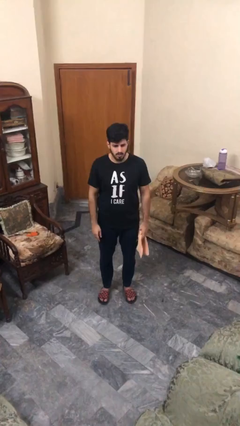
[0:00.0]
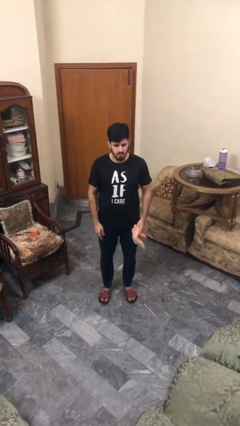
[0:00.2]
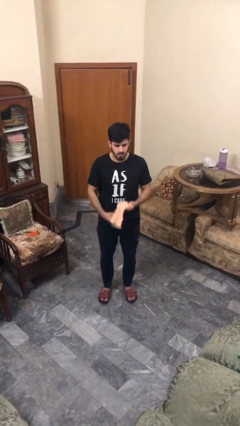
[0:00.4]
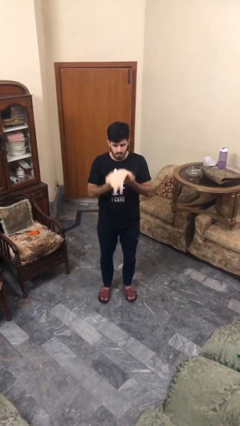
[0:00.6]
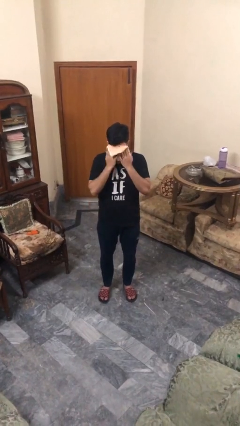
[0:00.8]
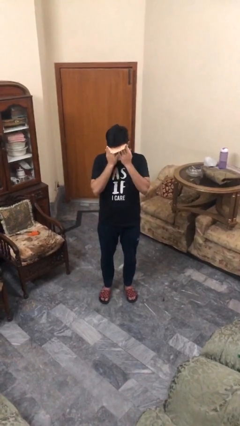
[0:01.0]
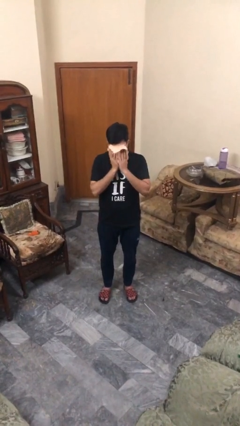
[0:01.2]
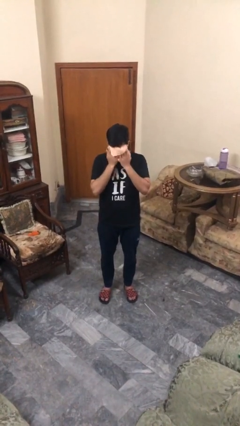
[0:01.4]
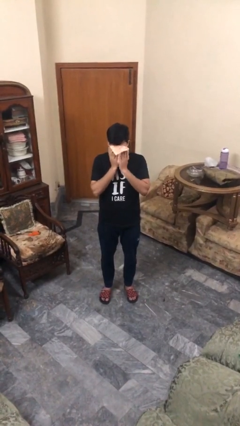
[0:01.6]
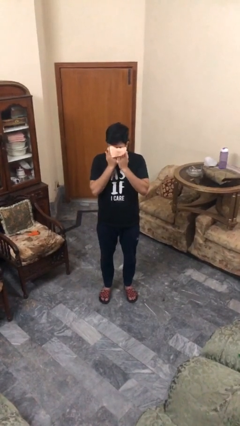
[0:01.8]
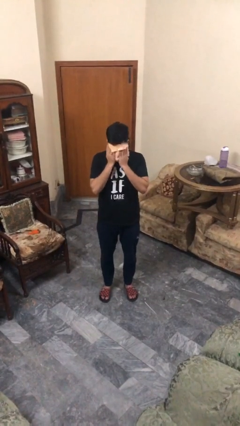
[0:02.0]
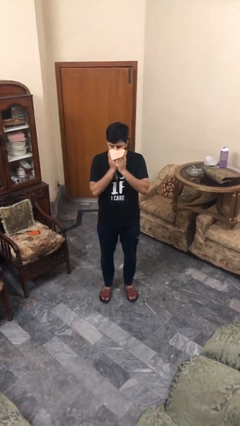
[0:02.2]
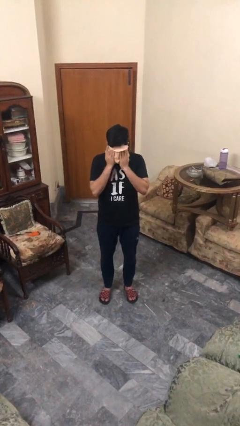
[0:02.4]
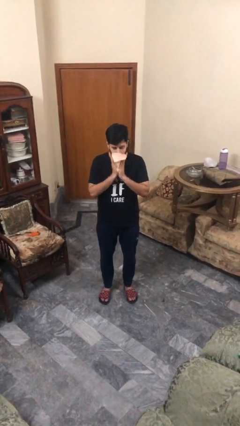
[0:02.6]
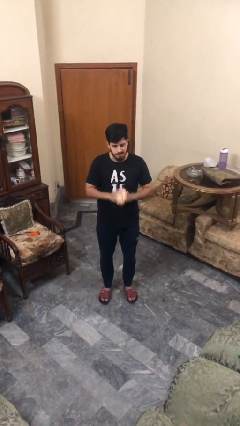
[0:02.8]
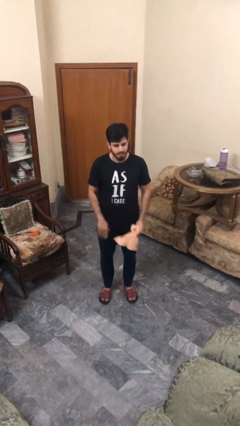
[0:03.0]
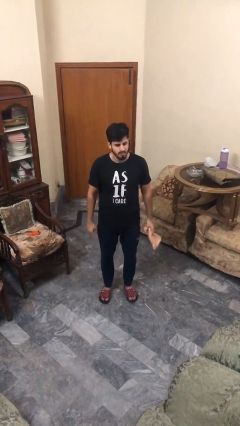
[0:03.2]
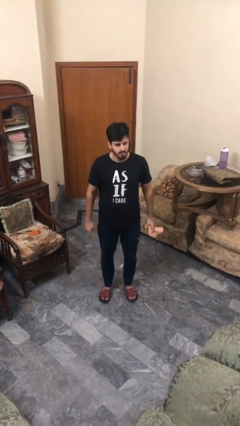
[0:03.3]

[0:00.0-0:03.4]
person wipes mouth with napkin

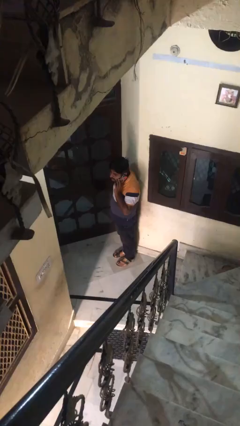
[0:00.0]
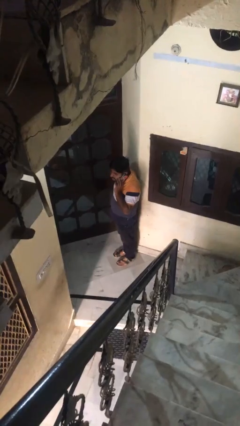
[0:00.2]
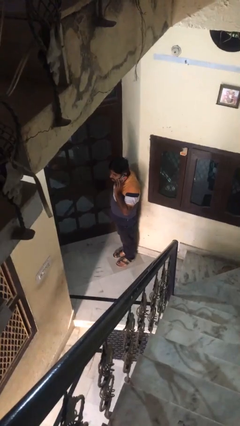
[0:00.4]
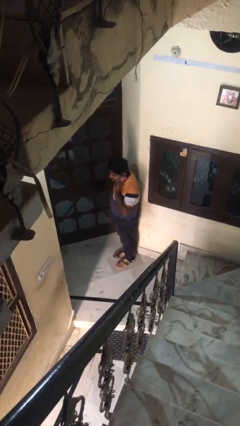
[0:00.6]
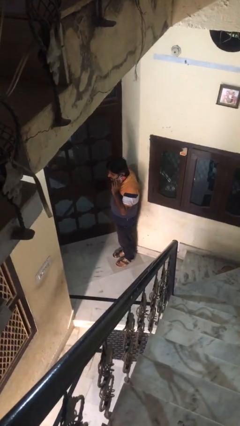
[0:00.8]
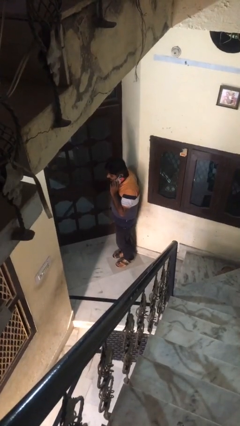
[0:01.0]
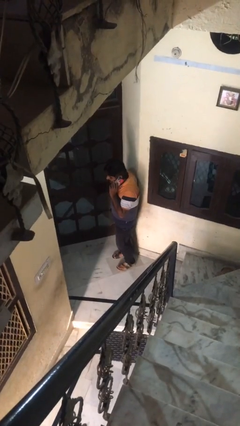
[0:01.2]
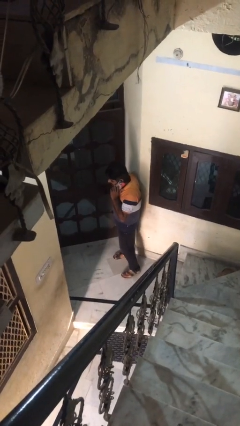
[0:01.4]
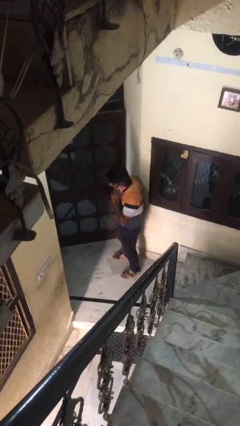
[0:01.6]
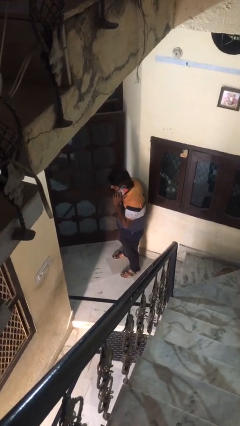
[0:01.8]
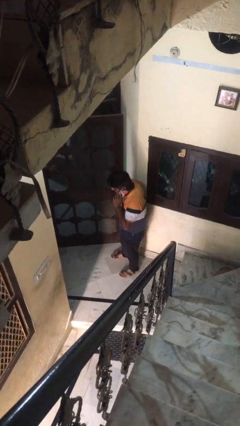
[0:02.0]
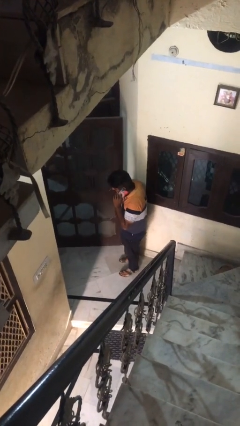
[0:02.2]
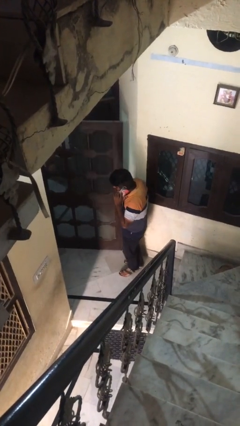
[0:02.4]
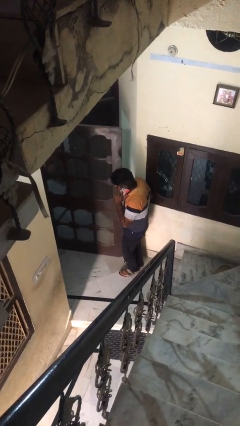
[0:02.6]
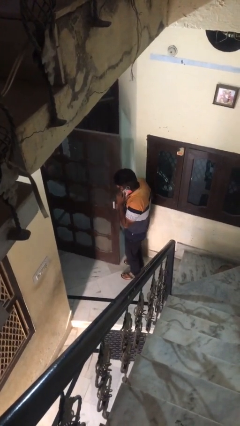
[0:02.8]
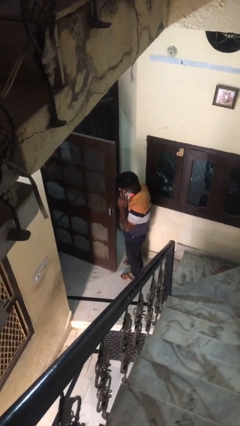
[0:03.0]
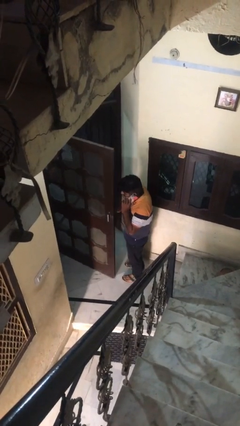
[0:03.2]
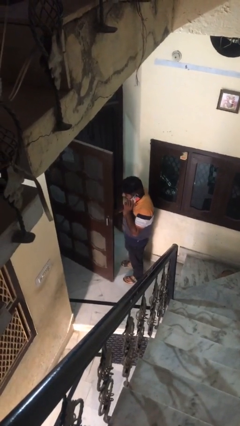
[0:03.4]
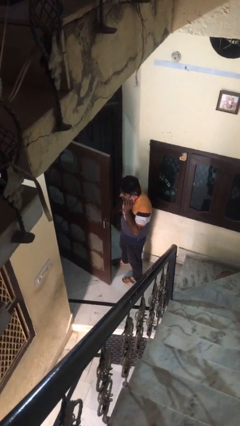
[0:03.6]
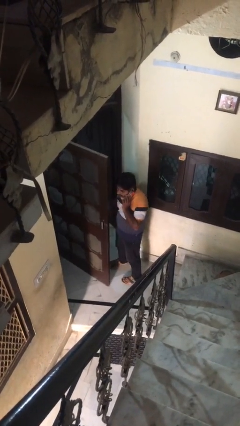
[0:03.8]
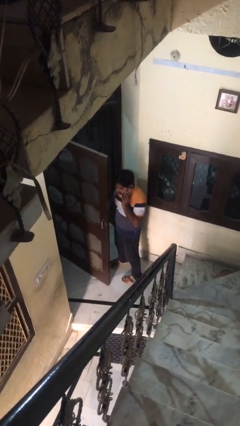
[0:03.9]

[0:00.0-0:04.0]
person opens facility door

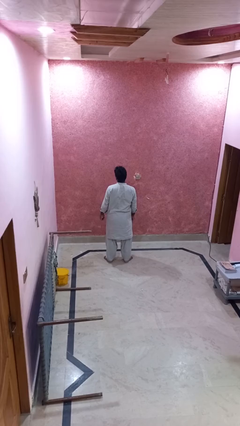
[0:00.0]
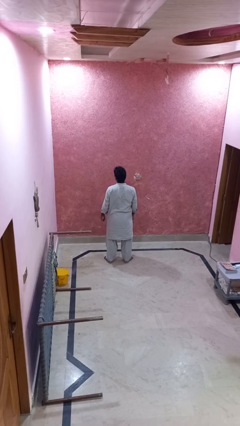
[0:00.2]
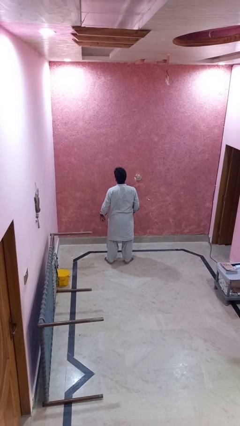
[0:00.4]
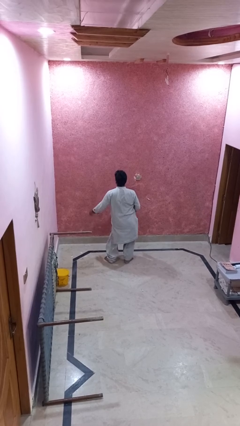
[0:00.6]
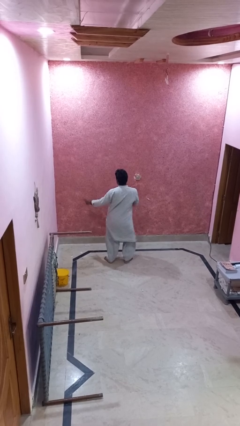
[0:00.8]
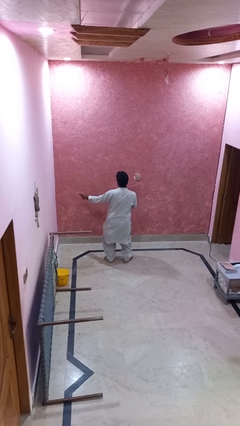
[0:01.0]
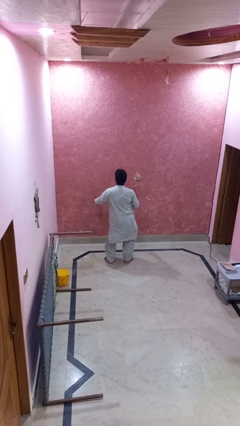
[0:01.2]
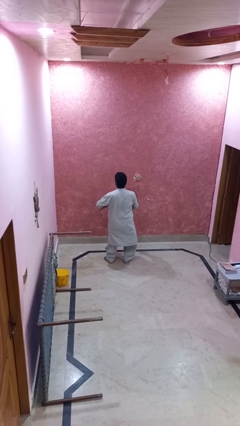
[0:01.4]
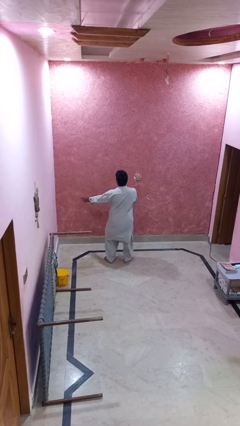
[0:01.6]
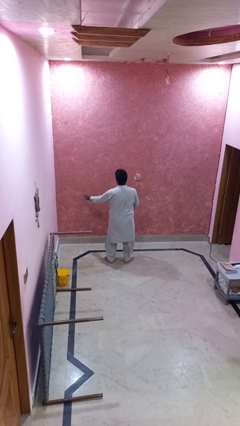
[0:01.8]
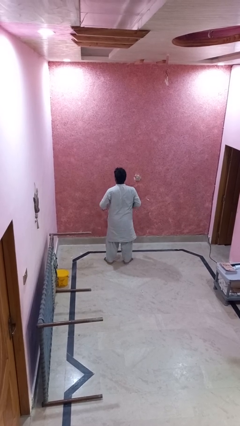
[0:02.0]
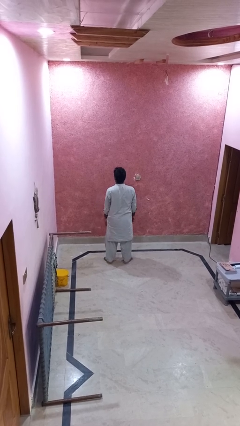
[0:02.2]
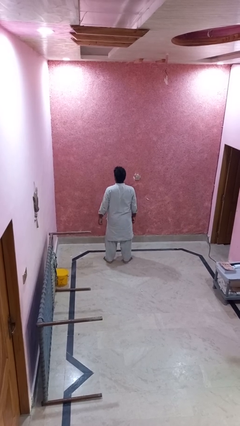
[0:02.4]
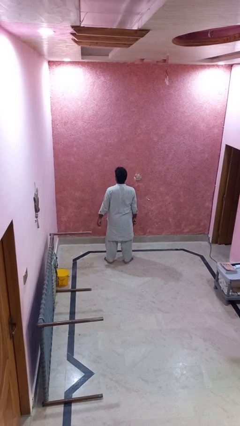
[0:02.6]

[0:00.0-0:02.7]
person dances in place

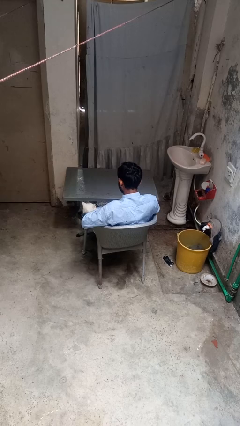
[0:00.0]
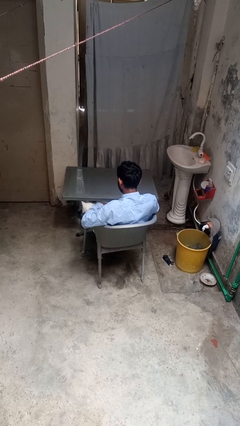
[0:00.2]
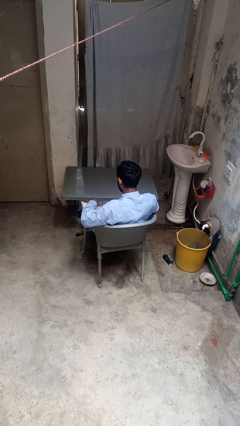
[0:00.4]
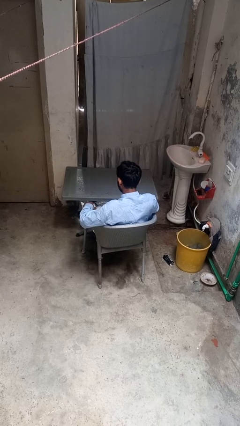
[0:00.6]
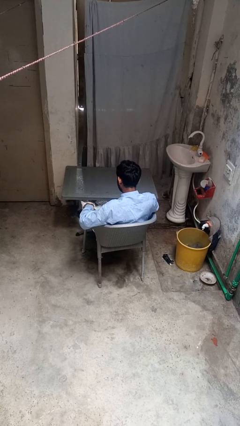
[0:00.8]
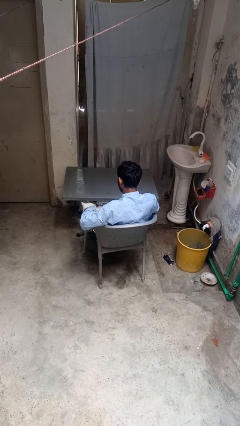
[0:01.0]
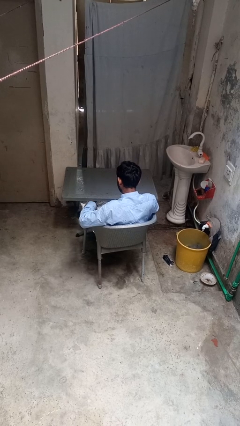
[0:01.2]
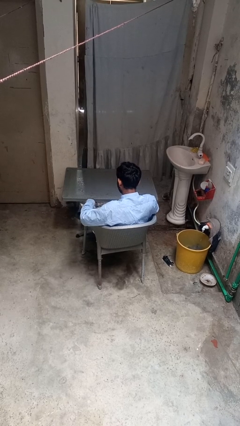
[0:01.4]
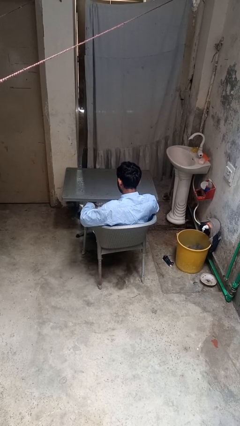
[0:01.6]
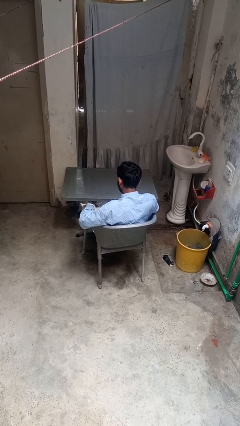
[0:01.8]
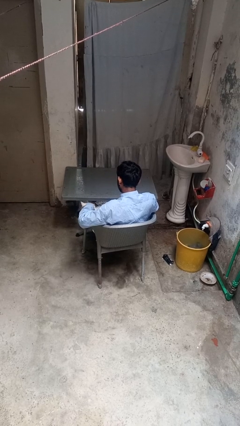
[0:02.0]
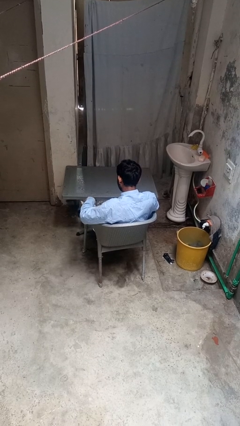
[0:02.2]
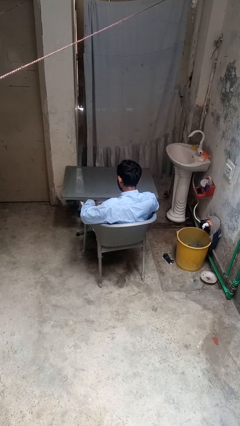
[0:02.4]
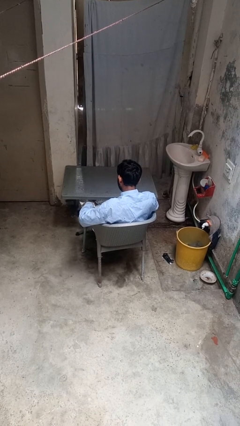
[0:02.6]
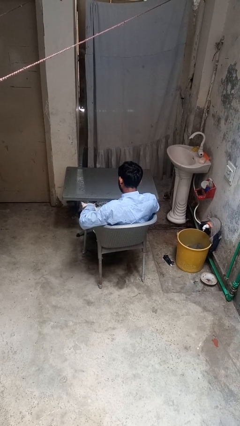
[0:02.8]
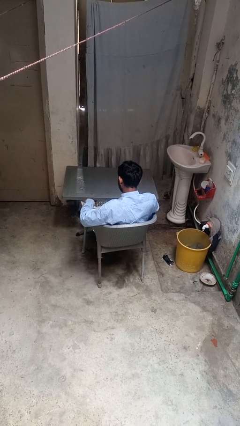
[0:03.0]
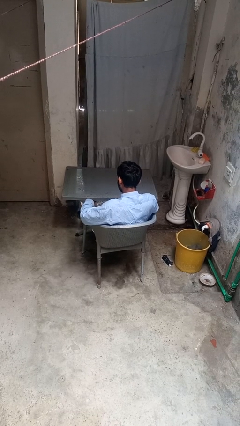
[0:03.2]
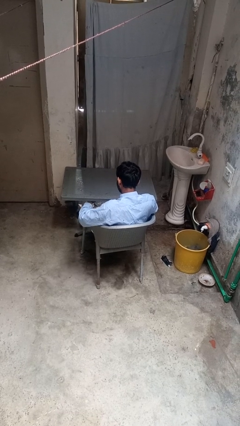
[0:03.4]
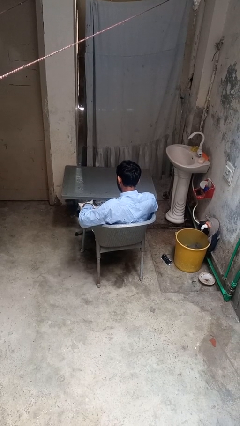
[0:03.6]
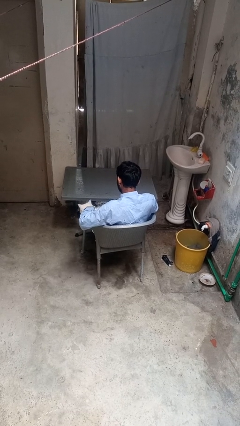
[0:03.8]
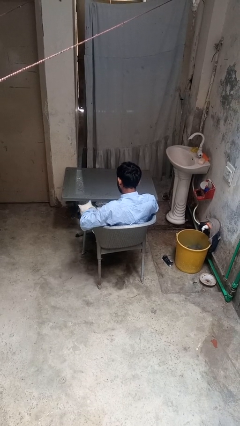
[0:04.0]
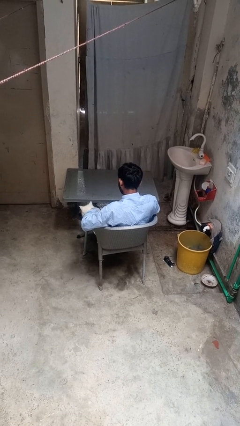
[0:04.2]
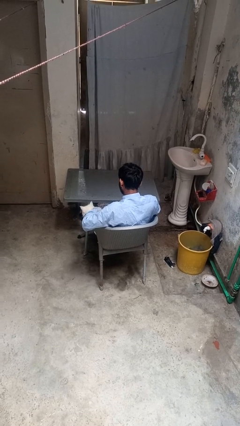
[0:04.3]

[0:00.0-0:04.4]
person pets cat

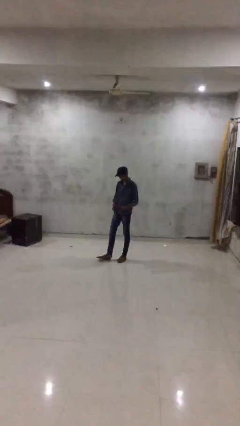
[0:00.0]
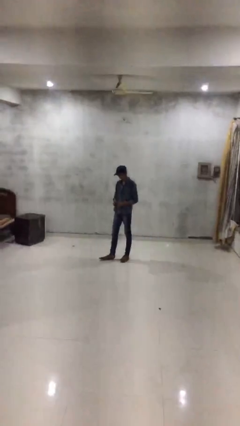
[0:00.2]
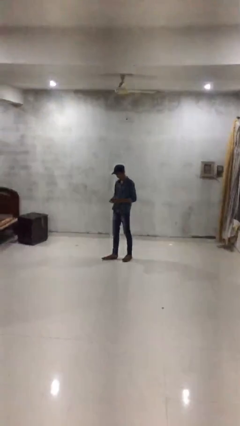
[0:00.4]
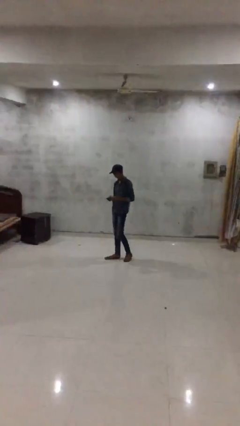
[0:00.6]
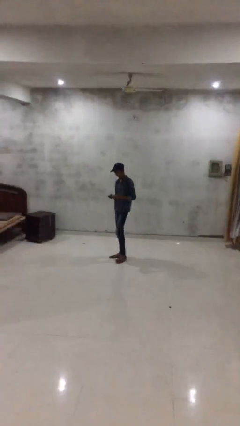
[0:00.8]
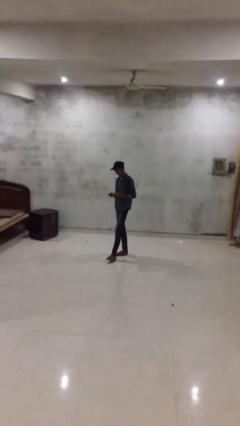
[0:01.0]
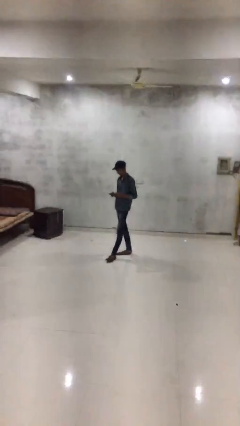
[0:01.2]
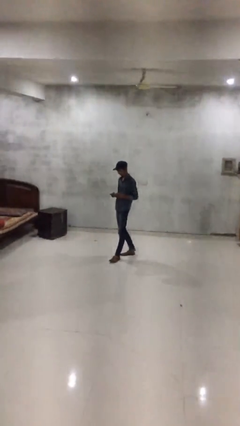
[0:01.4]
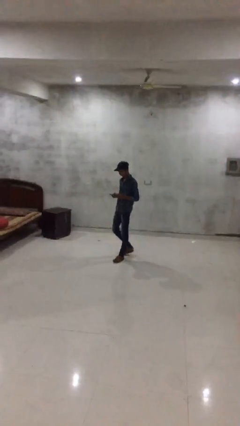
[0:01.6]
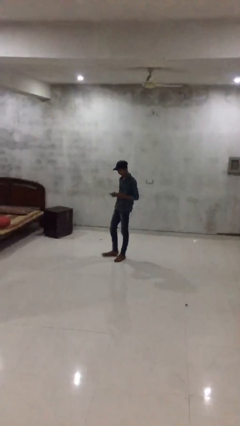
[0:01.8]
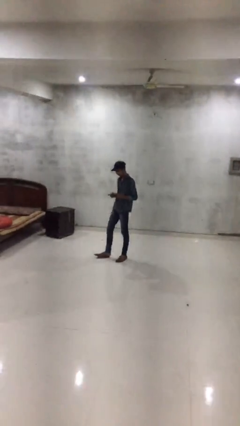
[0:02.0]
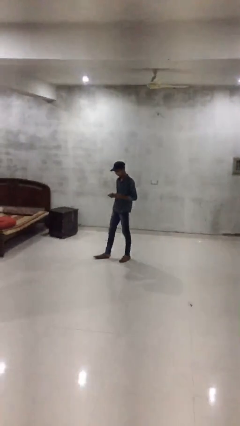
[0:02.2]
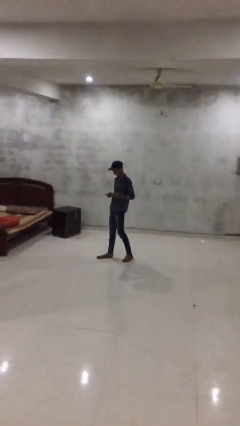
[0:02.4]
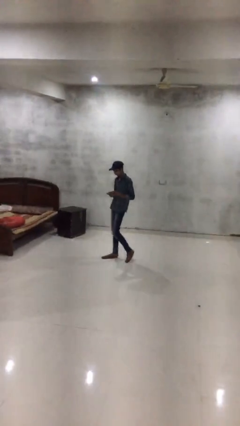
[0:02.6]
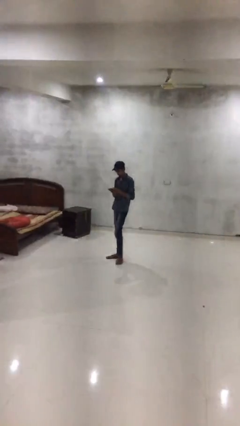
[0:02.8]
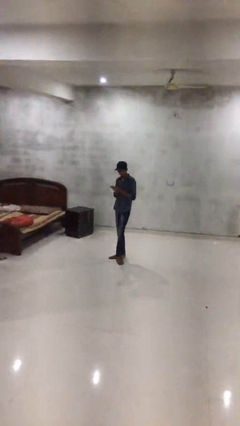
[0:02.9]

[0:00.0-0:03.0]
person texts on phone

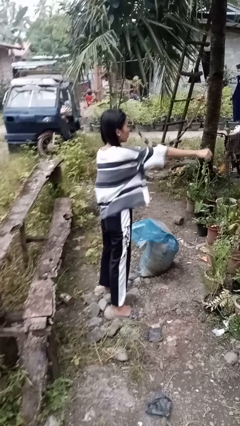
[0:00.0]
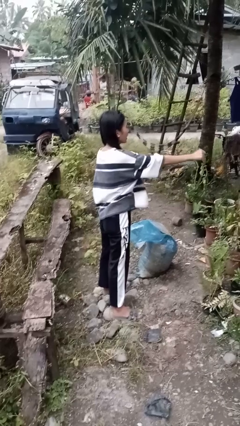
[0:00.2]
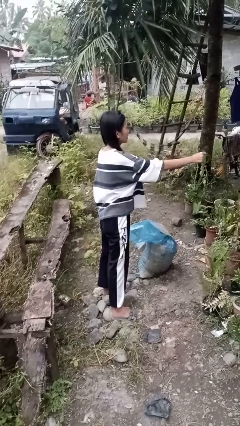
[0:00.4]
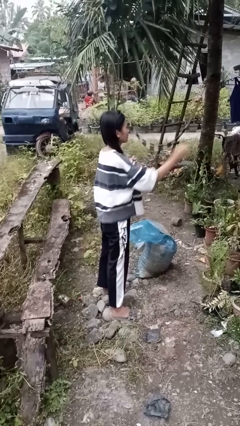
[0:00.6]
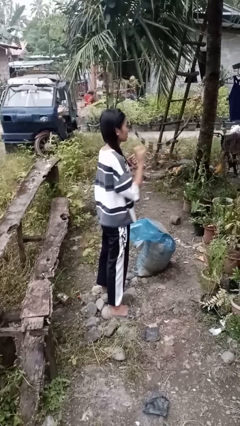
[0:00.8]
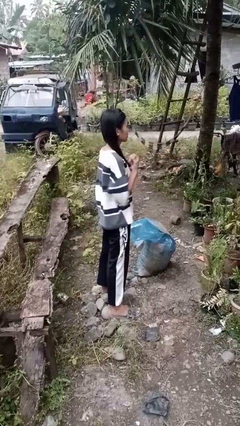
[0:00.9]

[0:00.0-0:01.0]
person punches
